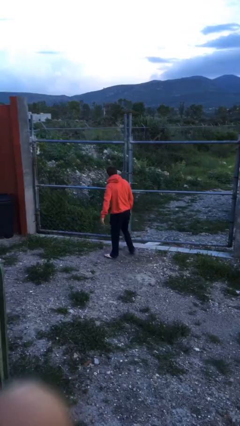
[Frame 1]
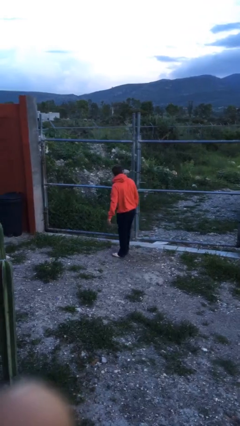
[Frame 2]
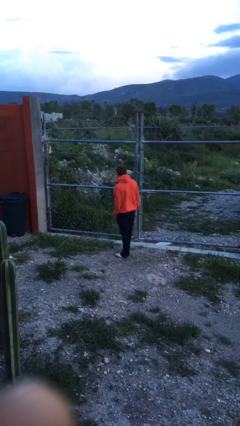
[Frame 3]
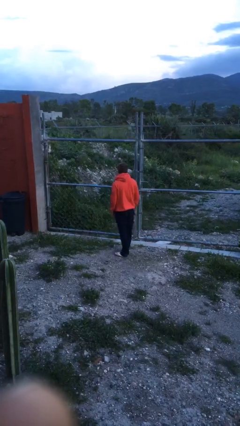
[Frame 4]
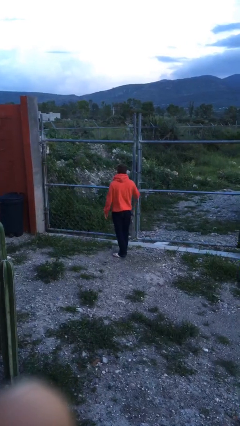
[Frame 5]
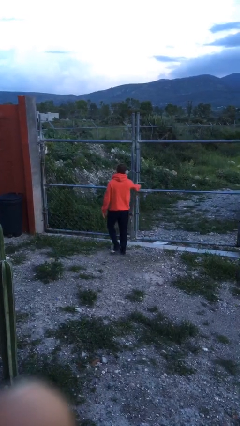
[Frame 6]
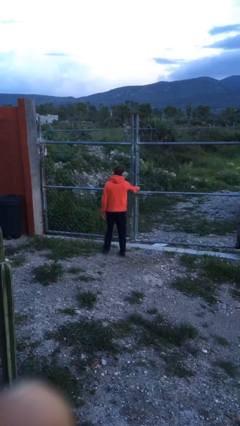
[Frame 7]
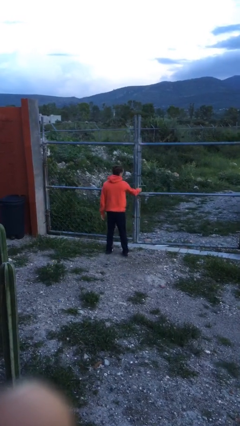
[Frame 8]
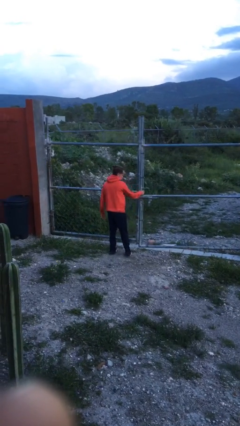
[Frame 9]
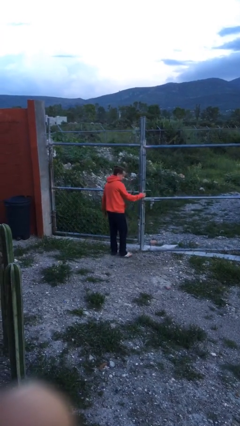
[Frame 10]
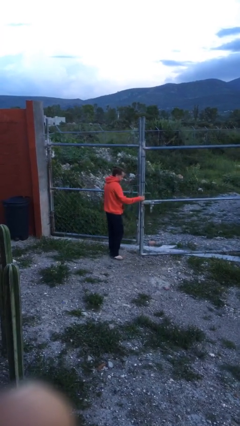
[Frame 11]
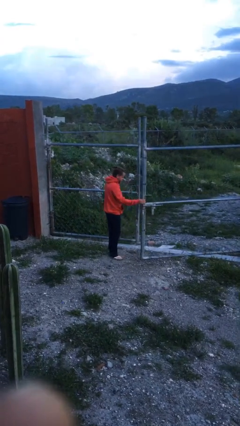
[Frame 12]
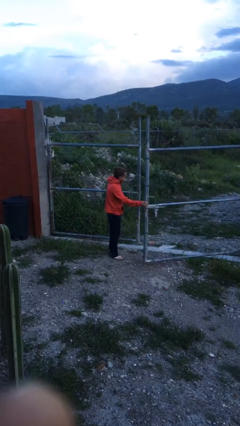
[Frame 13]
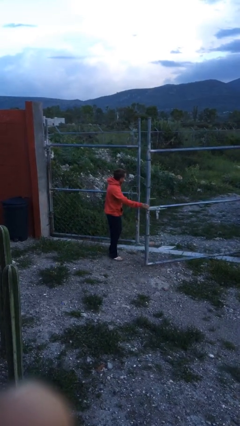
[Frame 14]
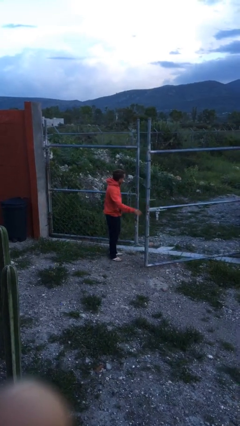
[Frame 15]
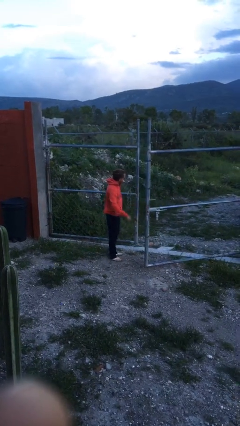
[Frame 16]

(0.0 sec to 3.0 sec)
person opens gate

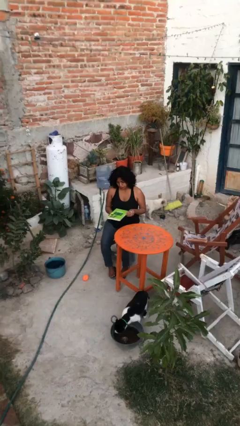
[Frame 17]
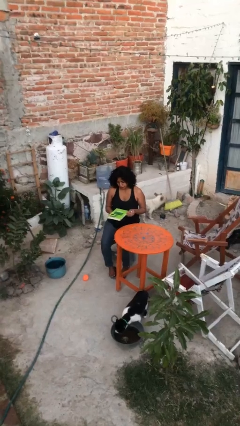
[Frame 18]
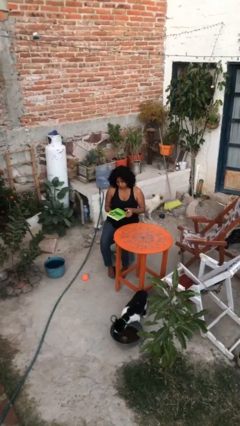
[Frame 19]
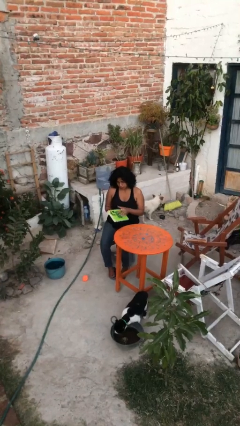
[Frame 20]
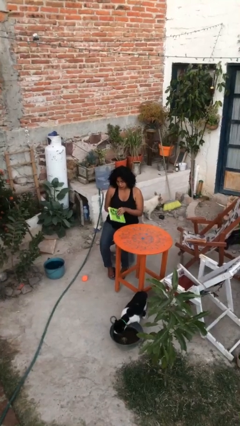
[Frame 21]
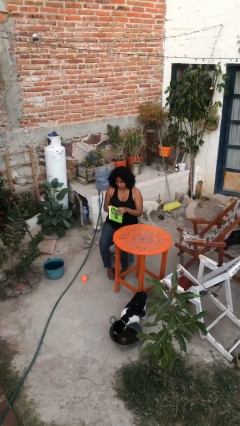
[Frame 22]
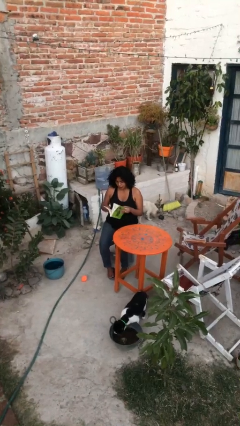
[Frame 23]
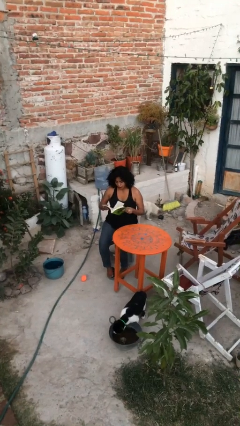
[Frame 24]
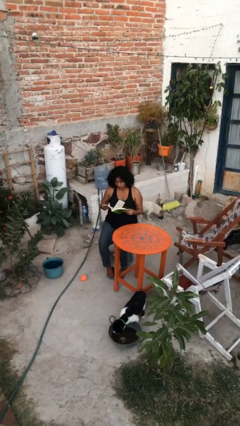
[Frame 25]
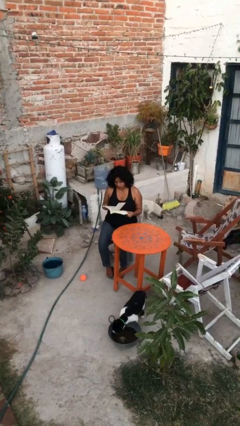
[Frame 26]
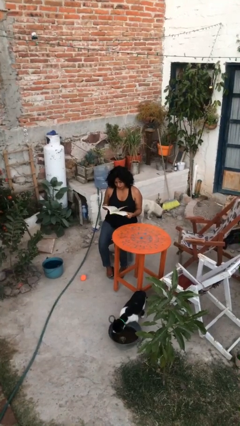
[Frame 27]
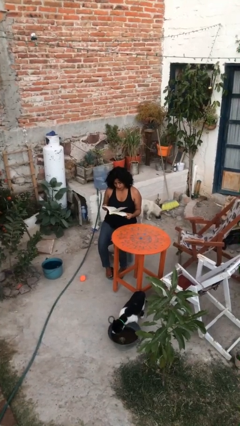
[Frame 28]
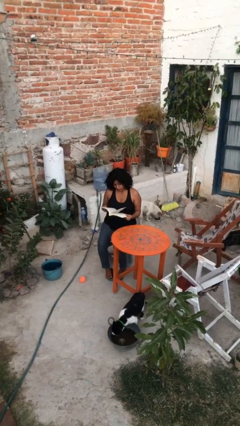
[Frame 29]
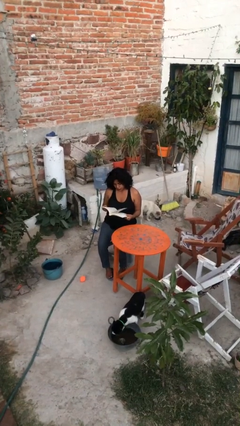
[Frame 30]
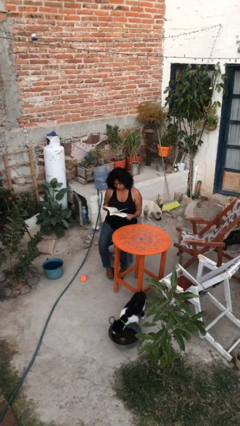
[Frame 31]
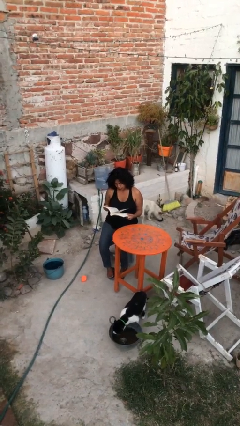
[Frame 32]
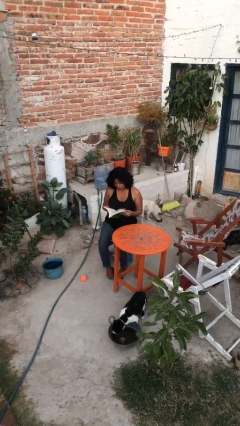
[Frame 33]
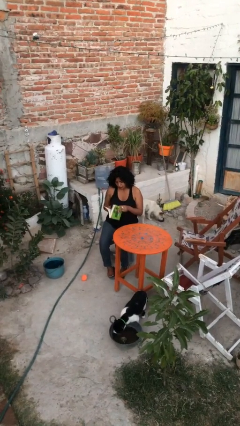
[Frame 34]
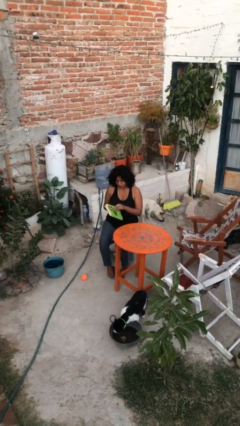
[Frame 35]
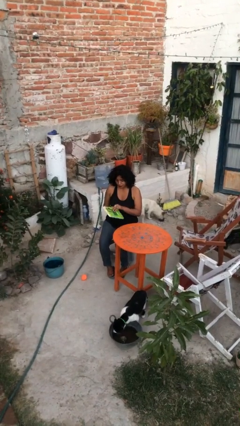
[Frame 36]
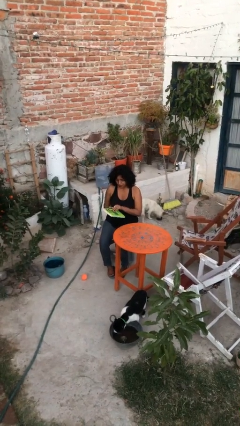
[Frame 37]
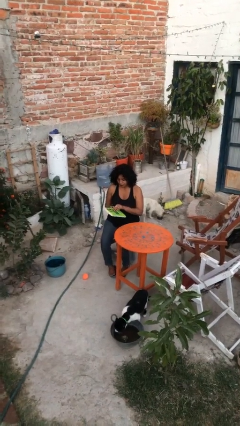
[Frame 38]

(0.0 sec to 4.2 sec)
person reads document

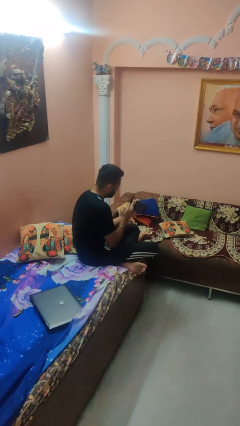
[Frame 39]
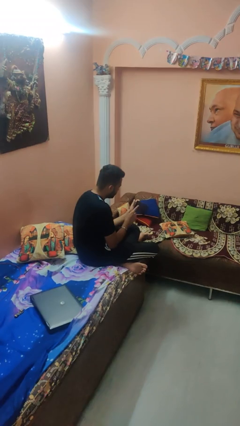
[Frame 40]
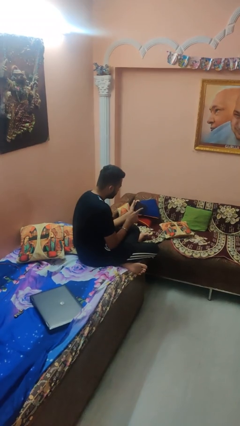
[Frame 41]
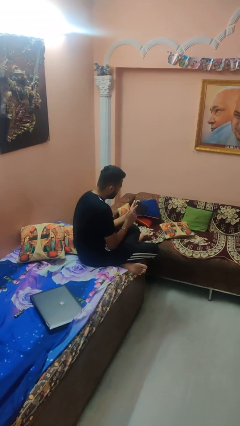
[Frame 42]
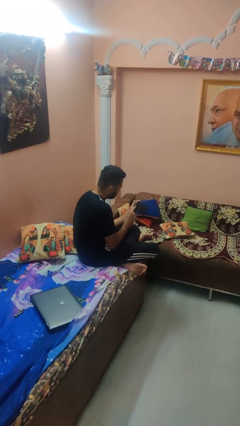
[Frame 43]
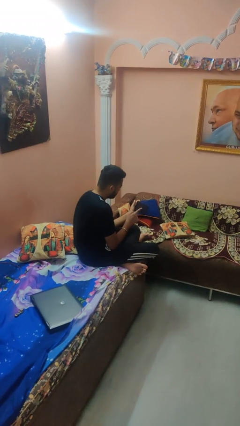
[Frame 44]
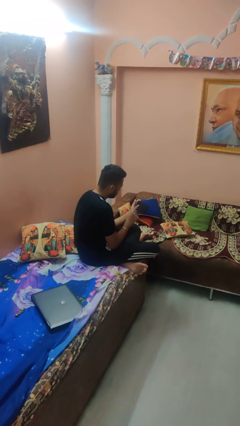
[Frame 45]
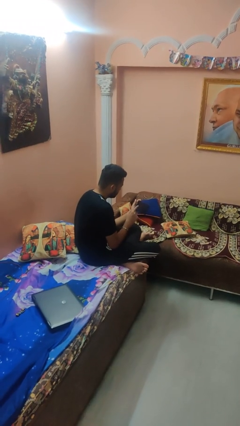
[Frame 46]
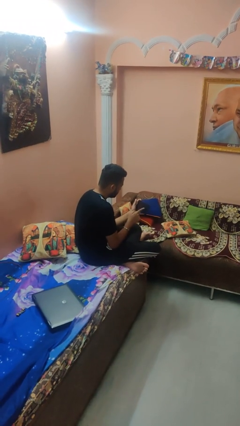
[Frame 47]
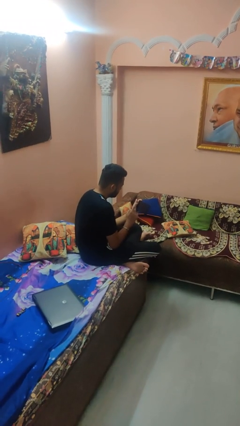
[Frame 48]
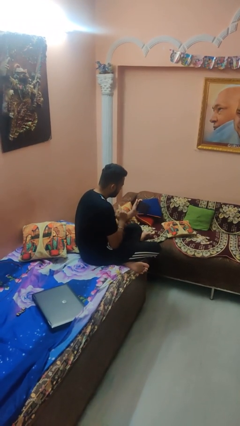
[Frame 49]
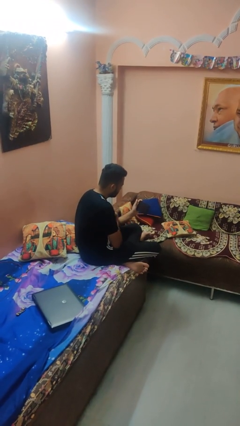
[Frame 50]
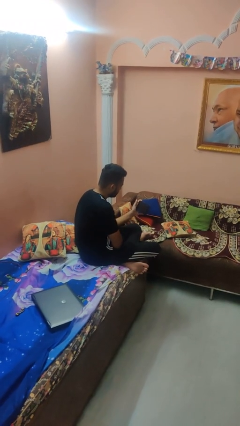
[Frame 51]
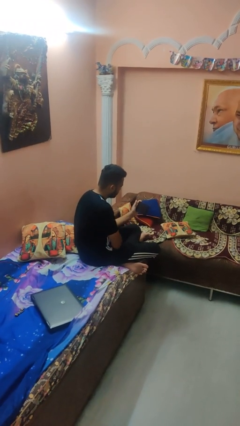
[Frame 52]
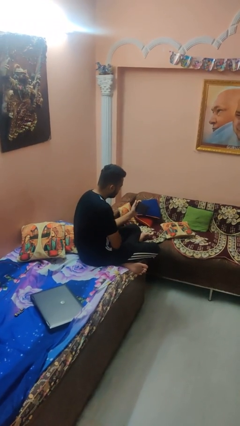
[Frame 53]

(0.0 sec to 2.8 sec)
person interacts with tablet

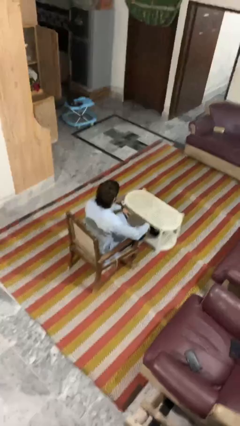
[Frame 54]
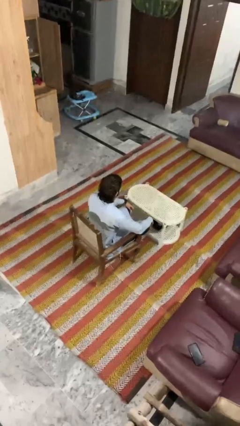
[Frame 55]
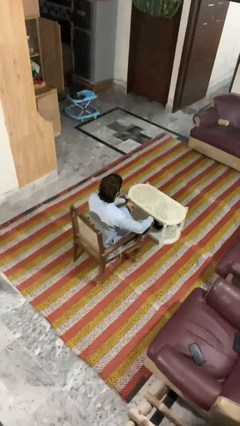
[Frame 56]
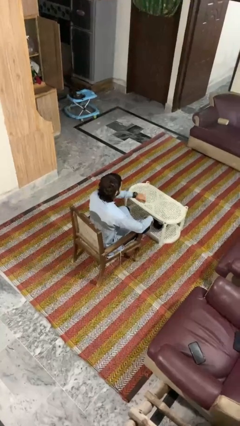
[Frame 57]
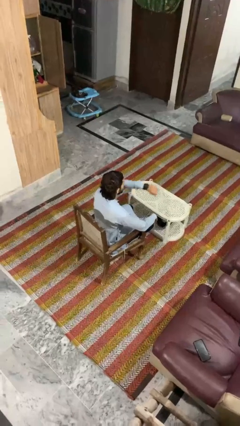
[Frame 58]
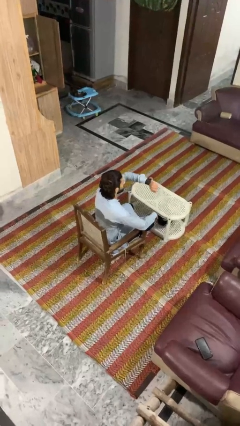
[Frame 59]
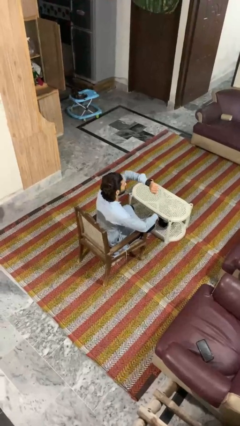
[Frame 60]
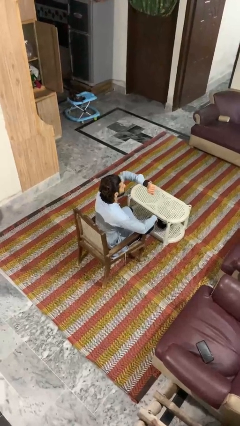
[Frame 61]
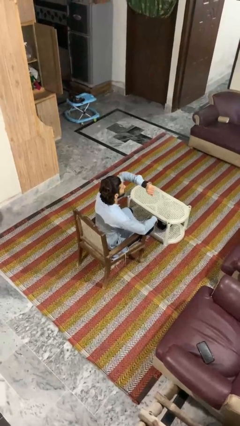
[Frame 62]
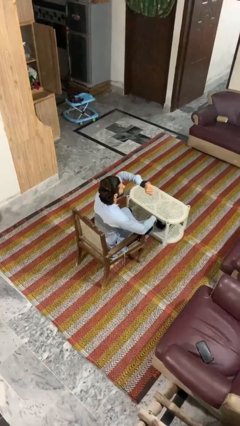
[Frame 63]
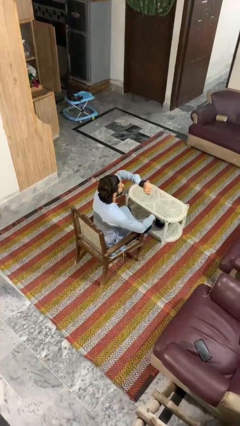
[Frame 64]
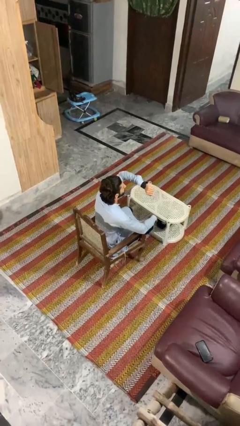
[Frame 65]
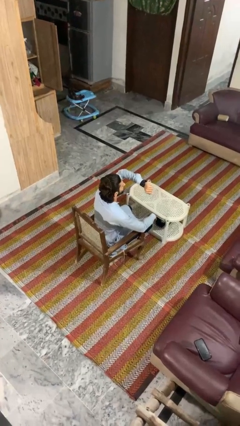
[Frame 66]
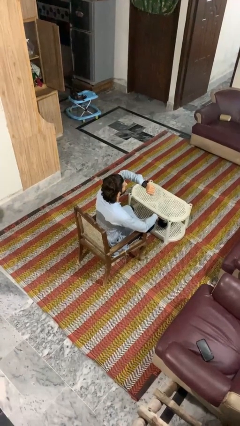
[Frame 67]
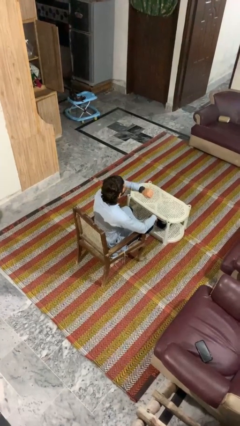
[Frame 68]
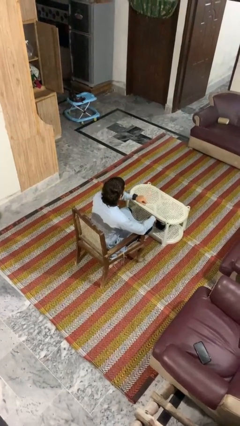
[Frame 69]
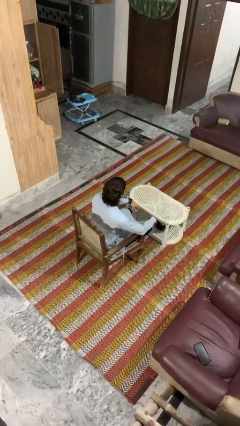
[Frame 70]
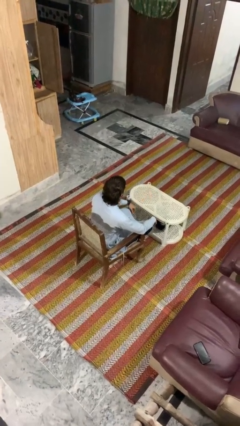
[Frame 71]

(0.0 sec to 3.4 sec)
person looks at wristwatch

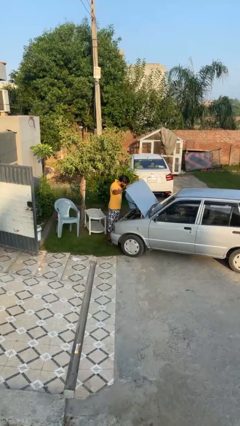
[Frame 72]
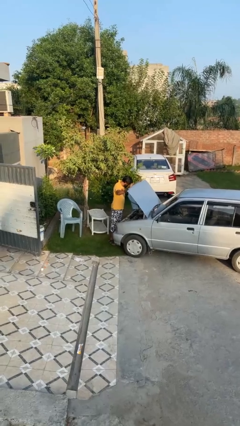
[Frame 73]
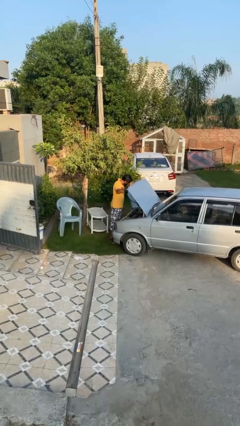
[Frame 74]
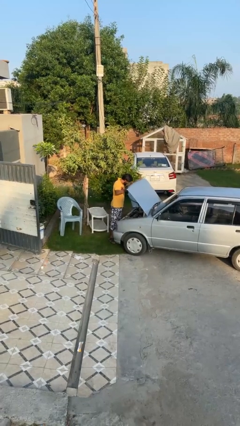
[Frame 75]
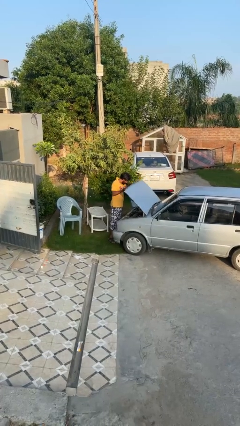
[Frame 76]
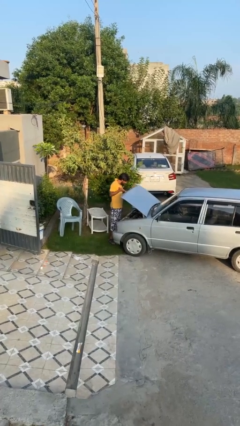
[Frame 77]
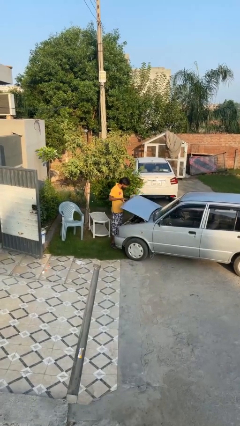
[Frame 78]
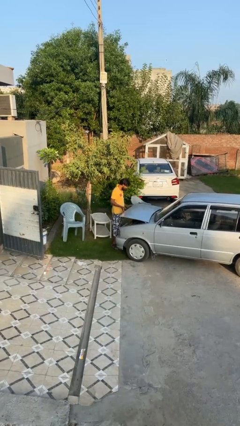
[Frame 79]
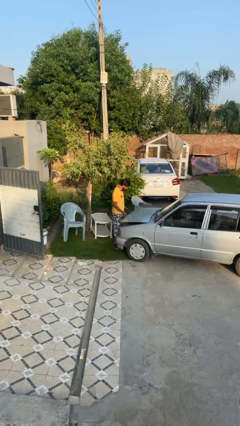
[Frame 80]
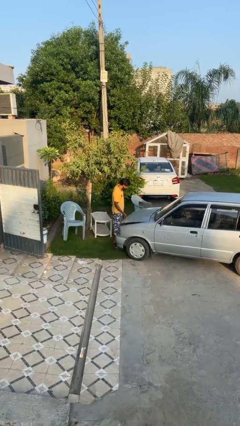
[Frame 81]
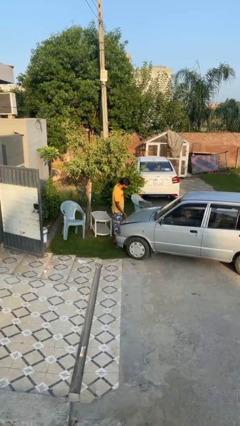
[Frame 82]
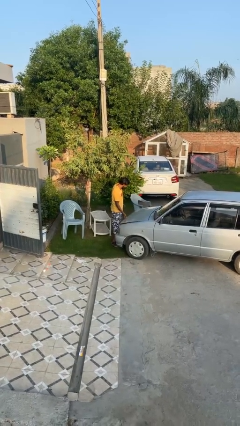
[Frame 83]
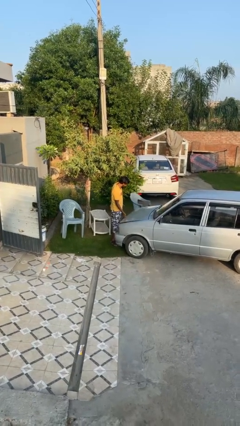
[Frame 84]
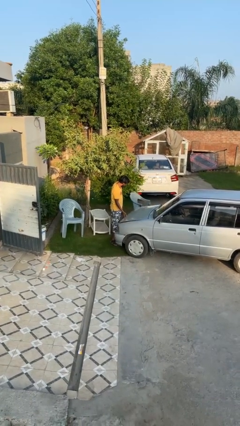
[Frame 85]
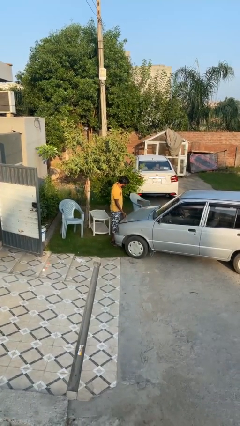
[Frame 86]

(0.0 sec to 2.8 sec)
person closes car hood

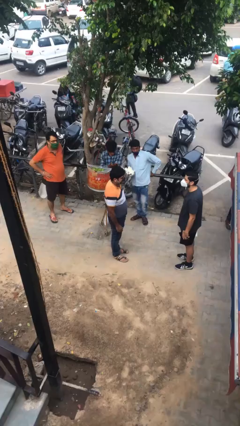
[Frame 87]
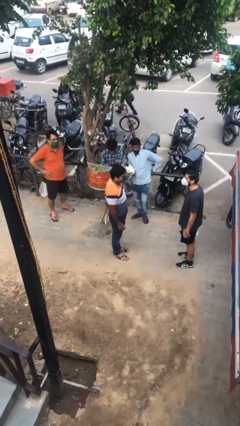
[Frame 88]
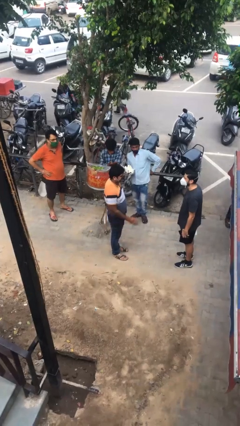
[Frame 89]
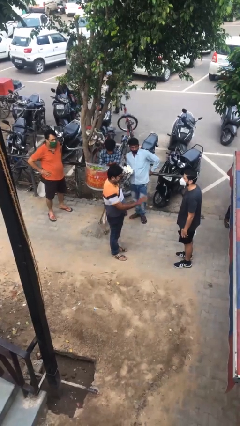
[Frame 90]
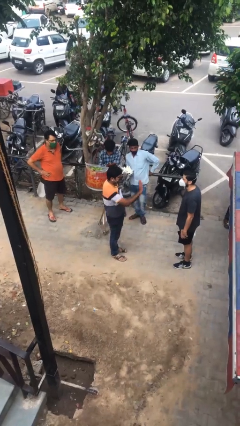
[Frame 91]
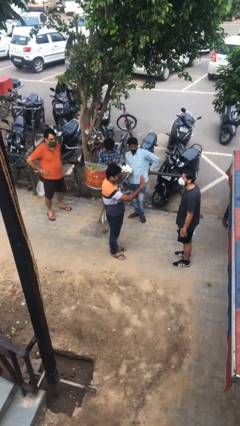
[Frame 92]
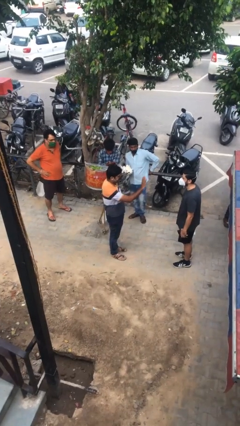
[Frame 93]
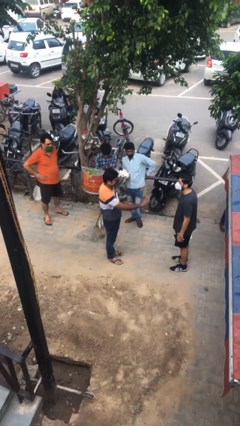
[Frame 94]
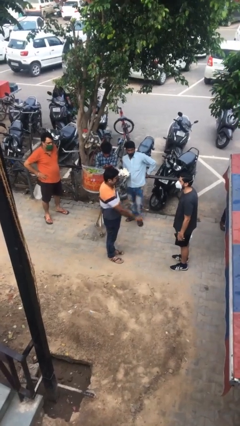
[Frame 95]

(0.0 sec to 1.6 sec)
person waves at person
